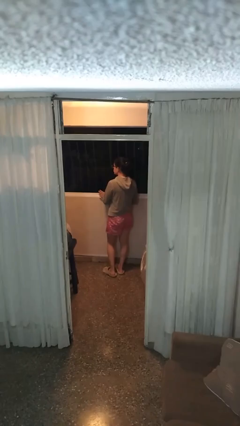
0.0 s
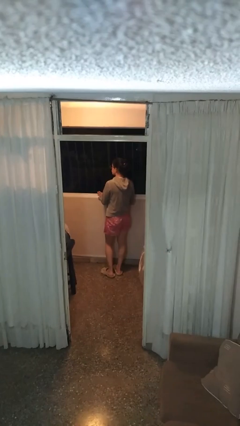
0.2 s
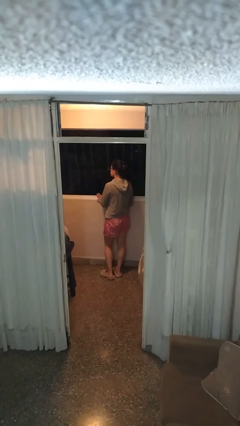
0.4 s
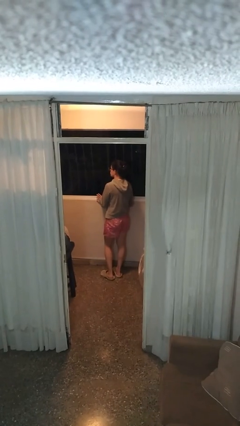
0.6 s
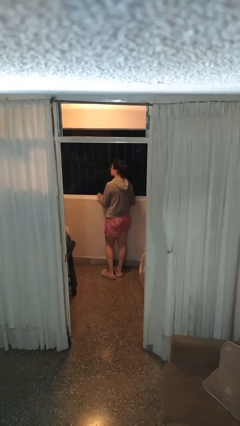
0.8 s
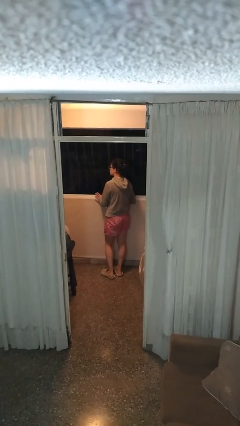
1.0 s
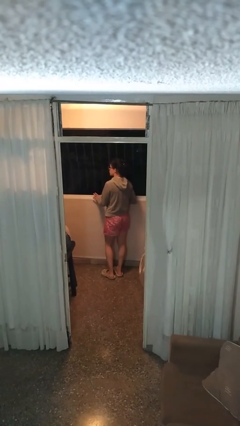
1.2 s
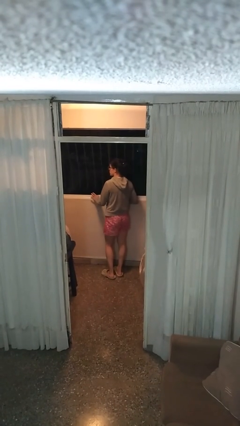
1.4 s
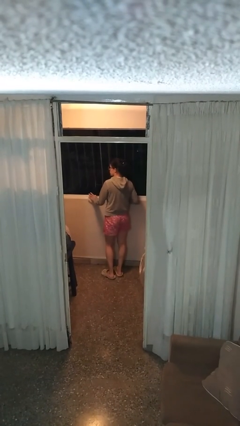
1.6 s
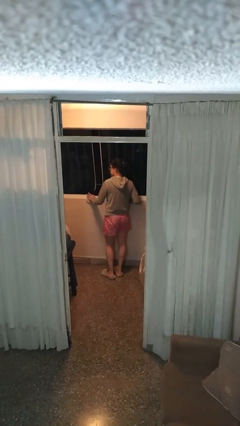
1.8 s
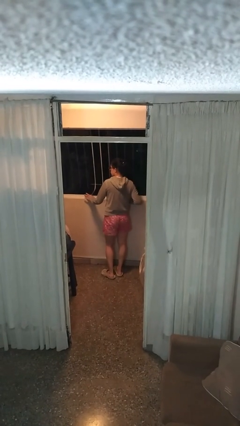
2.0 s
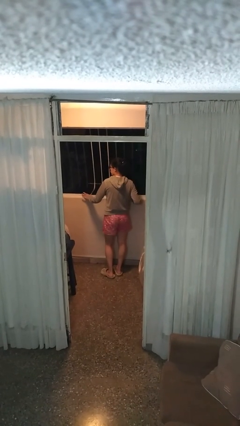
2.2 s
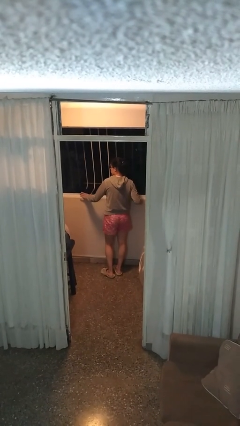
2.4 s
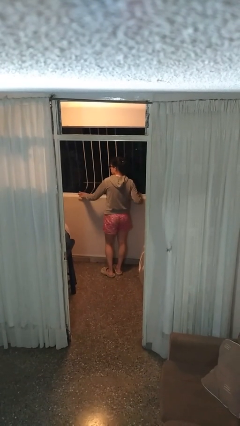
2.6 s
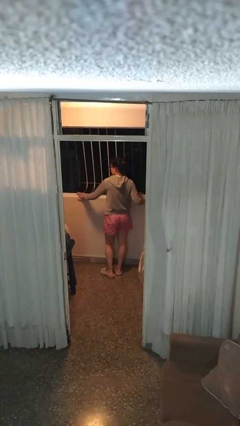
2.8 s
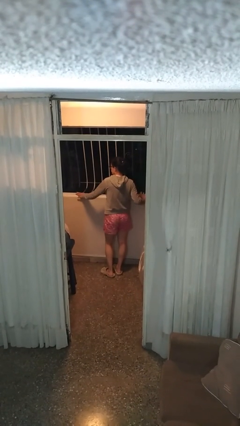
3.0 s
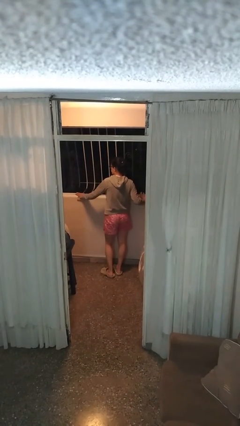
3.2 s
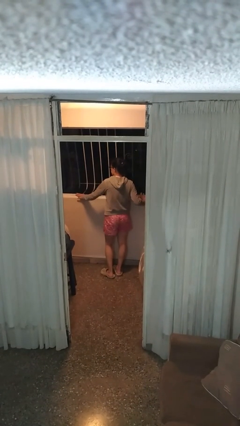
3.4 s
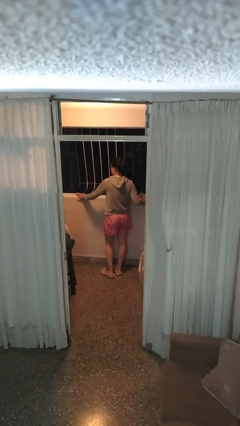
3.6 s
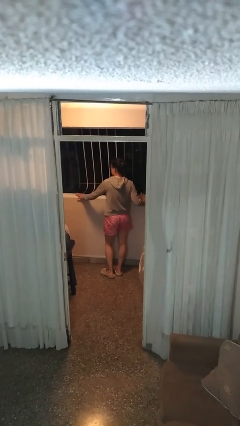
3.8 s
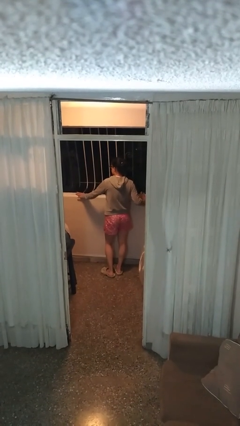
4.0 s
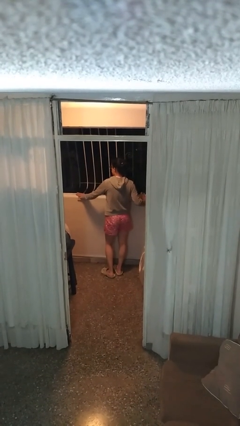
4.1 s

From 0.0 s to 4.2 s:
person opens home window

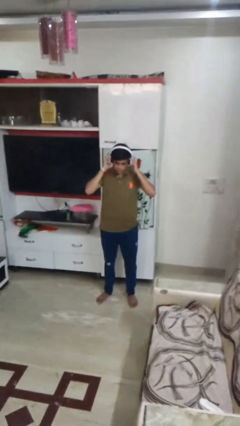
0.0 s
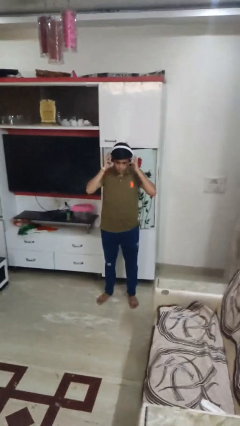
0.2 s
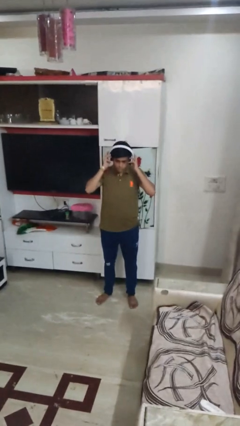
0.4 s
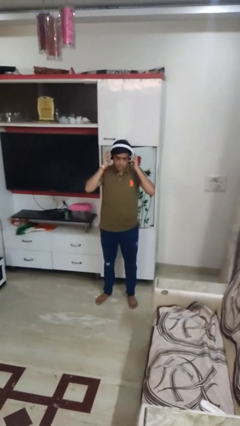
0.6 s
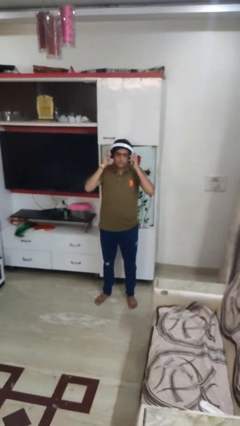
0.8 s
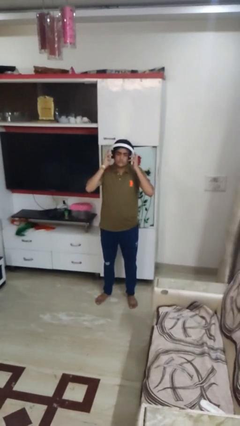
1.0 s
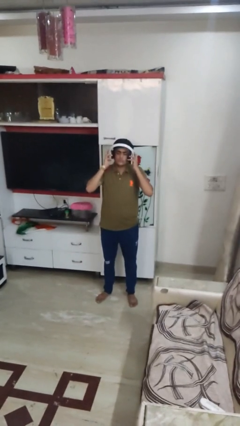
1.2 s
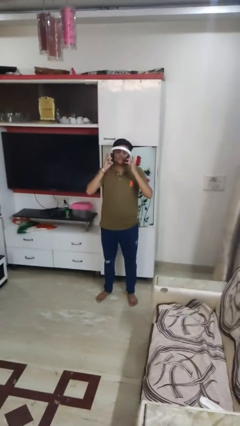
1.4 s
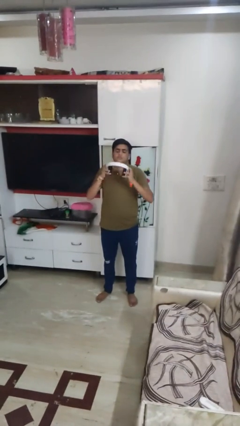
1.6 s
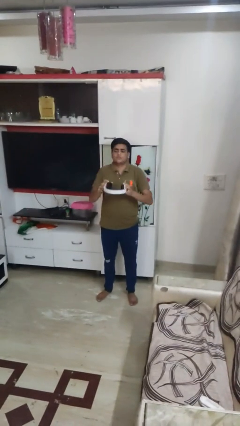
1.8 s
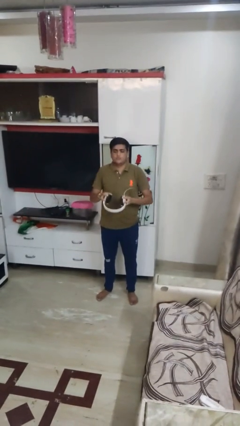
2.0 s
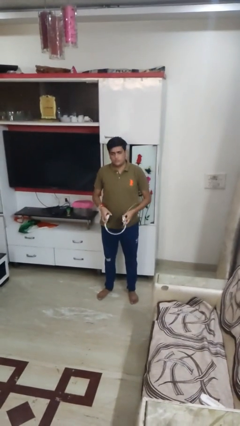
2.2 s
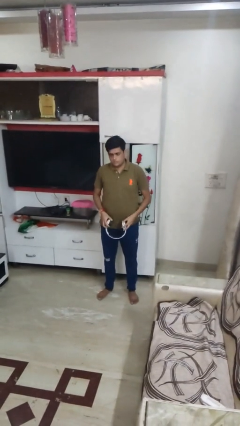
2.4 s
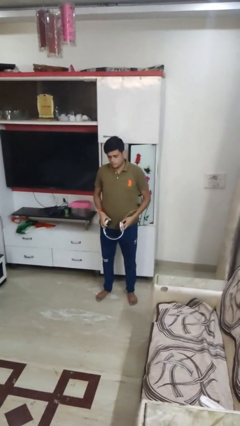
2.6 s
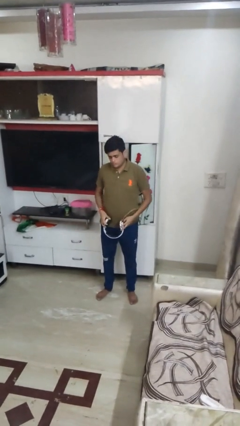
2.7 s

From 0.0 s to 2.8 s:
person takes off headphones

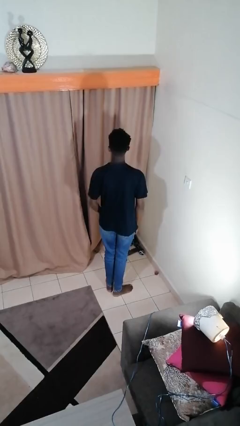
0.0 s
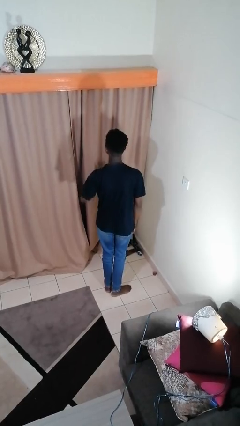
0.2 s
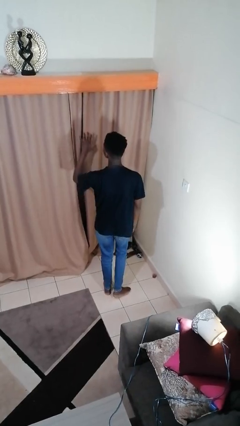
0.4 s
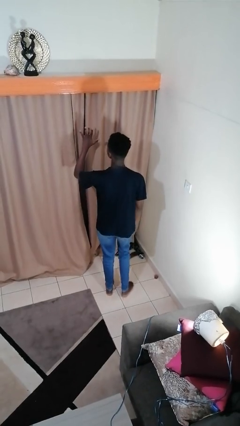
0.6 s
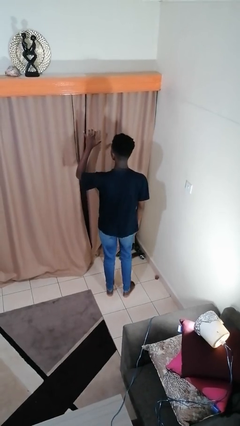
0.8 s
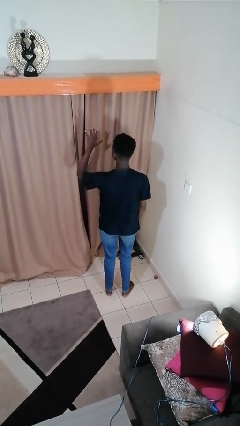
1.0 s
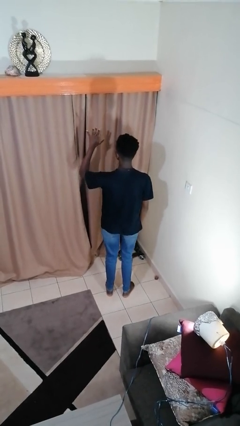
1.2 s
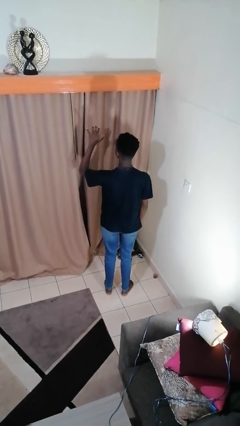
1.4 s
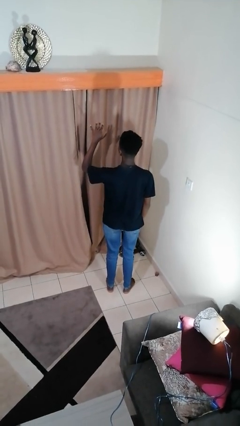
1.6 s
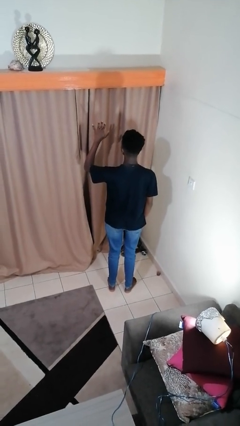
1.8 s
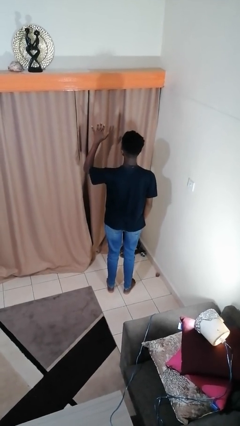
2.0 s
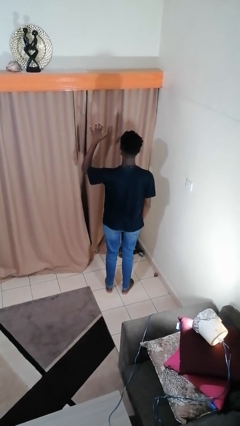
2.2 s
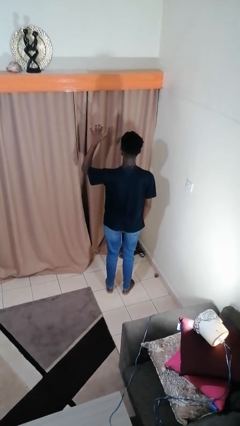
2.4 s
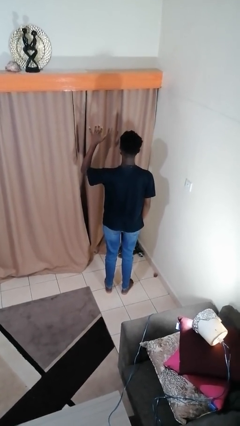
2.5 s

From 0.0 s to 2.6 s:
person gestures number five

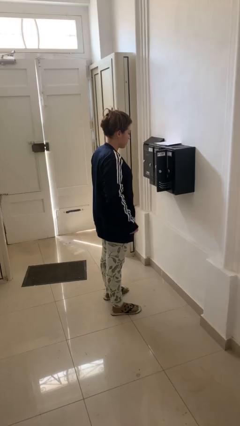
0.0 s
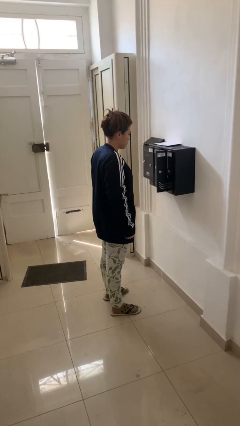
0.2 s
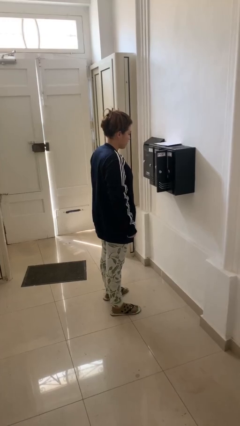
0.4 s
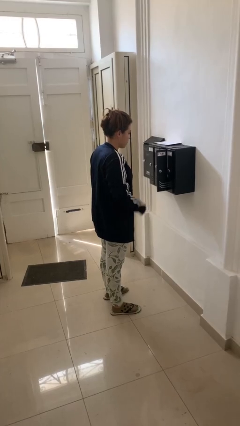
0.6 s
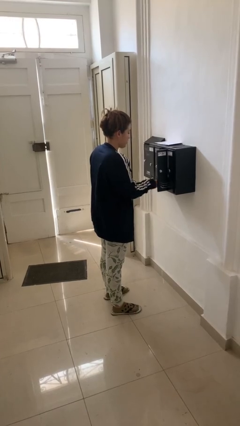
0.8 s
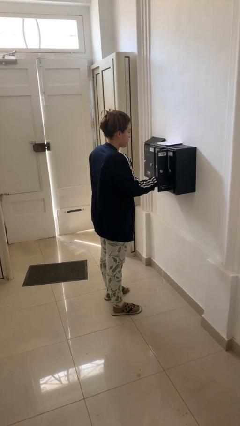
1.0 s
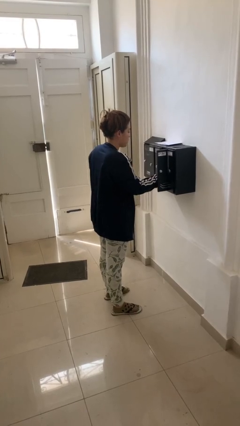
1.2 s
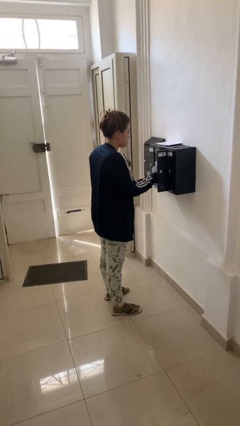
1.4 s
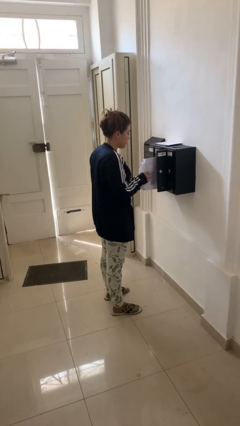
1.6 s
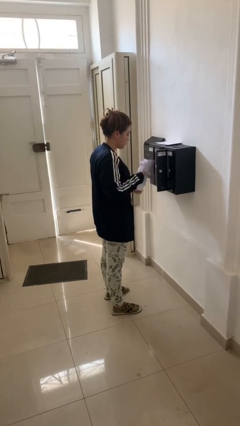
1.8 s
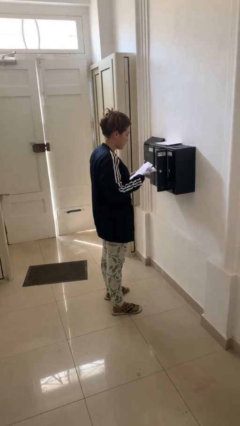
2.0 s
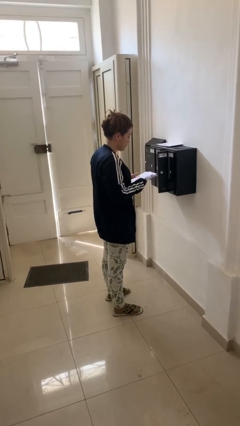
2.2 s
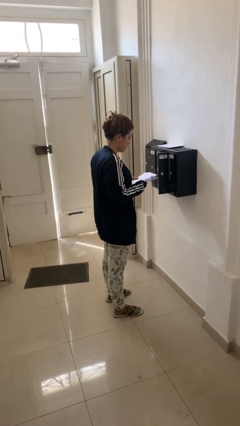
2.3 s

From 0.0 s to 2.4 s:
person takes letters from mailbox

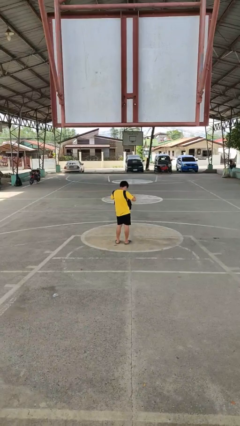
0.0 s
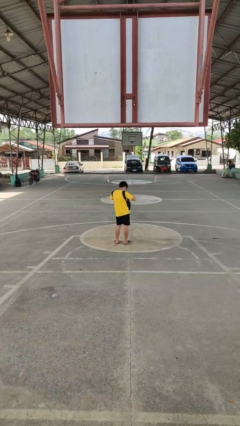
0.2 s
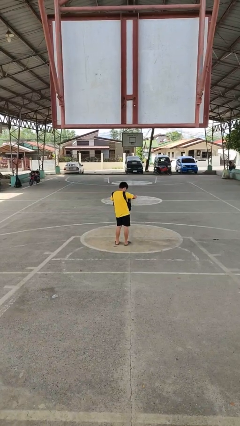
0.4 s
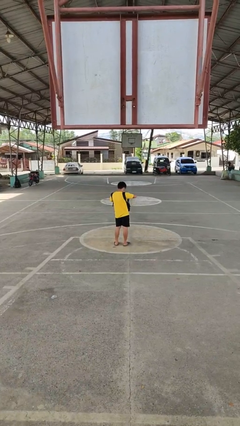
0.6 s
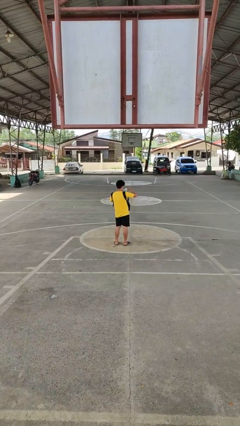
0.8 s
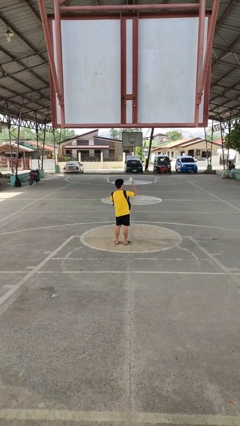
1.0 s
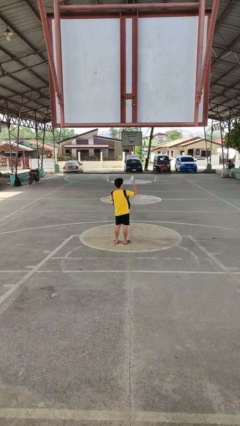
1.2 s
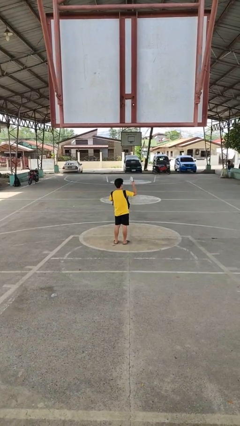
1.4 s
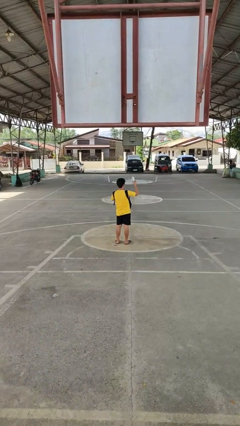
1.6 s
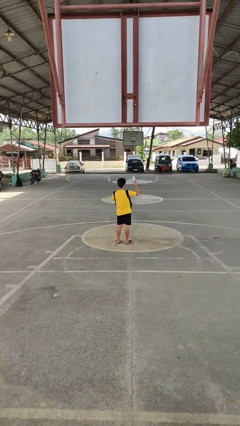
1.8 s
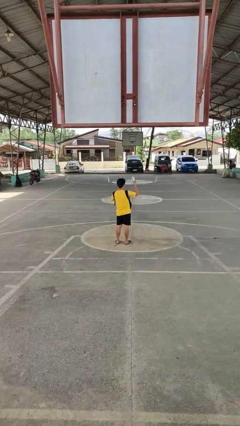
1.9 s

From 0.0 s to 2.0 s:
person takes object from backpack

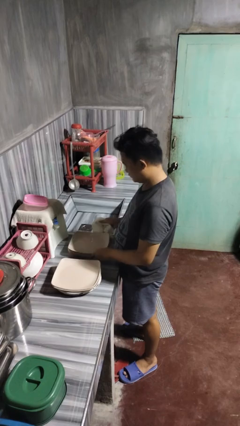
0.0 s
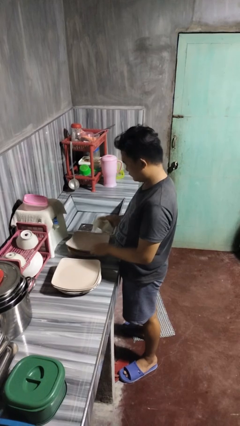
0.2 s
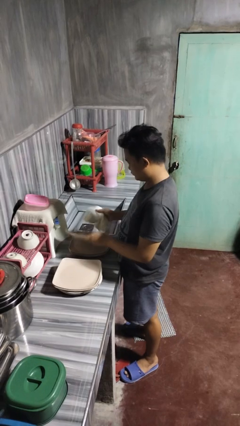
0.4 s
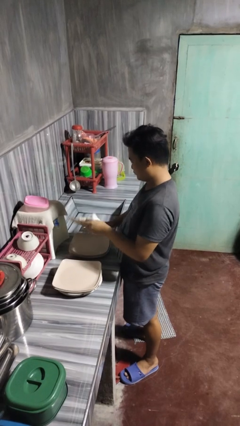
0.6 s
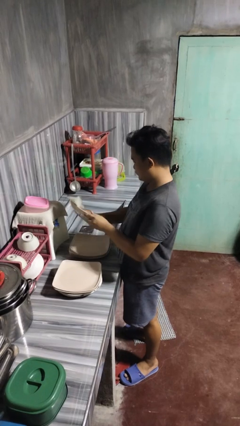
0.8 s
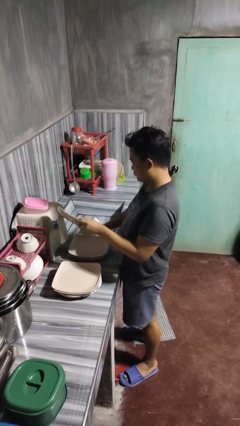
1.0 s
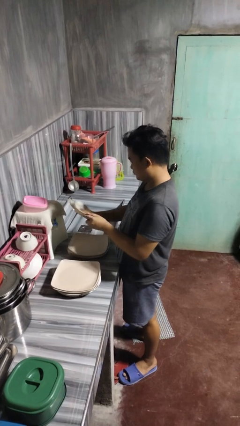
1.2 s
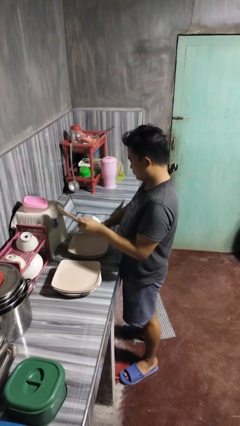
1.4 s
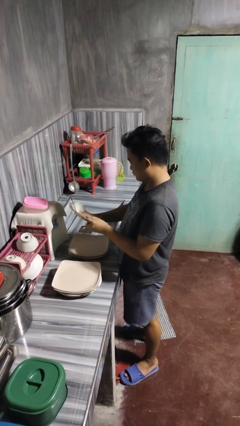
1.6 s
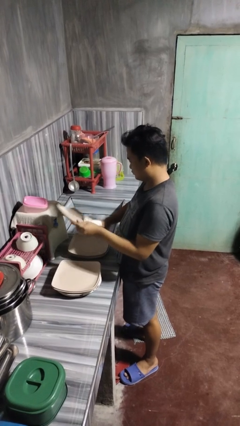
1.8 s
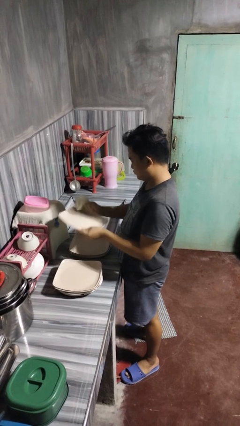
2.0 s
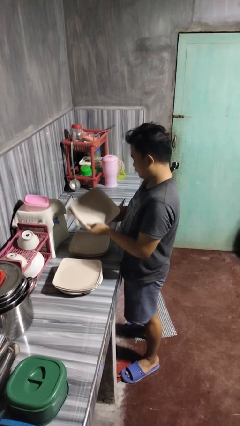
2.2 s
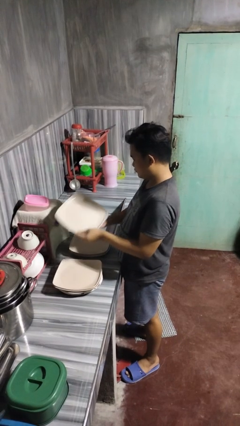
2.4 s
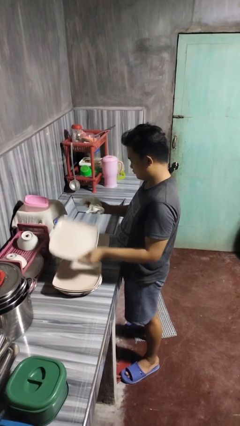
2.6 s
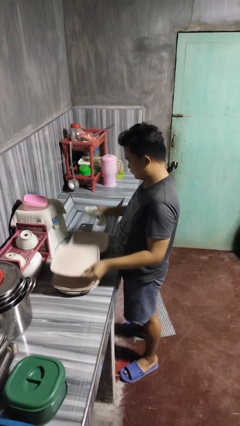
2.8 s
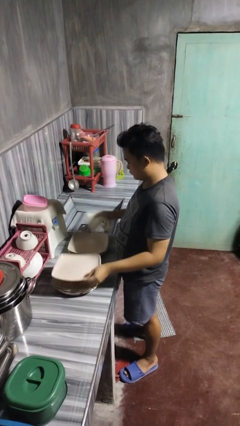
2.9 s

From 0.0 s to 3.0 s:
person dries dish

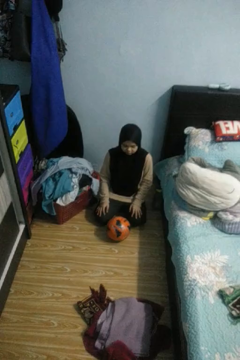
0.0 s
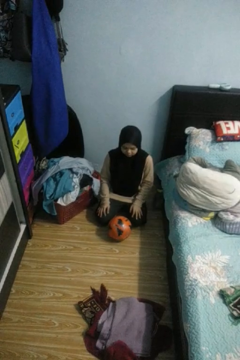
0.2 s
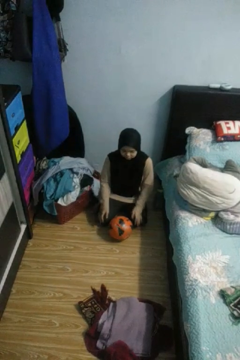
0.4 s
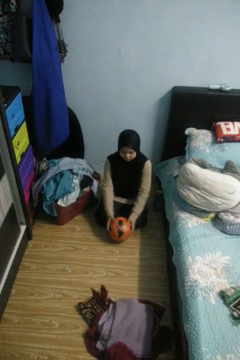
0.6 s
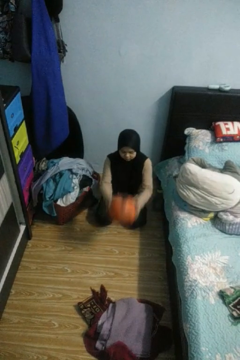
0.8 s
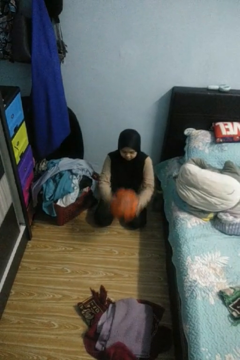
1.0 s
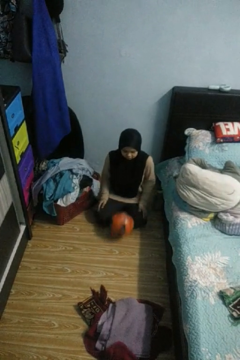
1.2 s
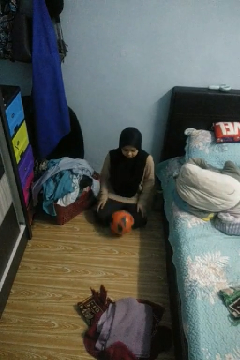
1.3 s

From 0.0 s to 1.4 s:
person bounces ball on floor
